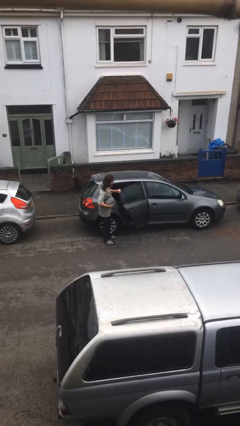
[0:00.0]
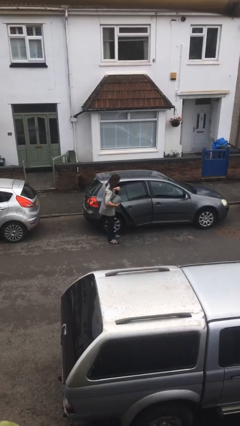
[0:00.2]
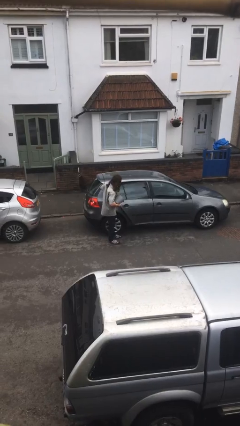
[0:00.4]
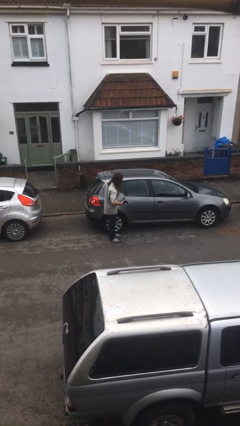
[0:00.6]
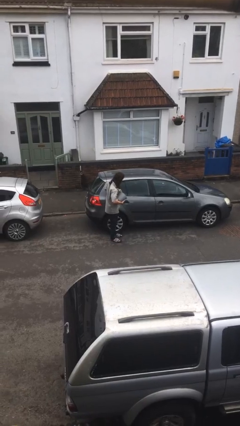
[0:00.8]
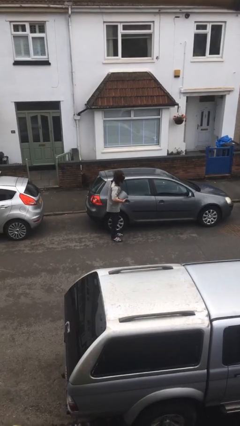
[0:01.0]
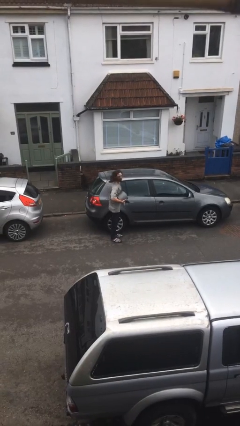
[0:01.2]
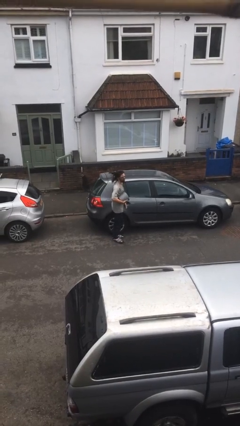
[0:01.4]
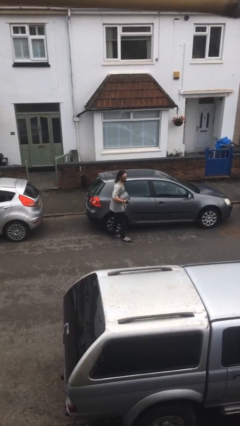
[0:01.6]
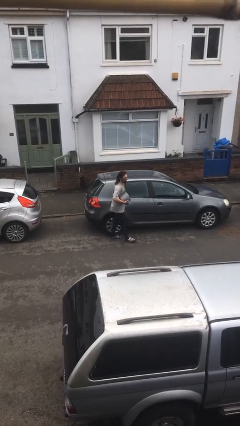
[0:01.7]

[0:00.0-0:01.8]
person closes car door

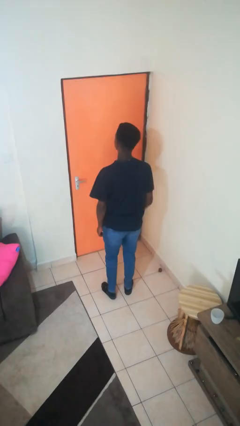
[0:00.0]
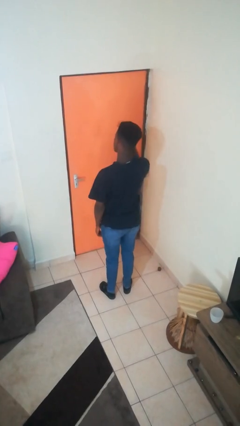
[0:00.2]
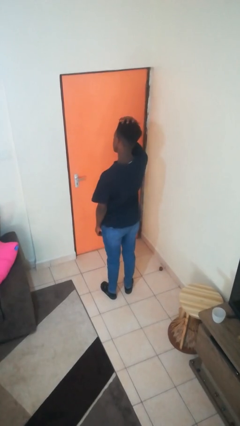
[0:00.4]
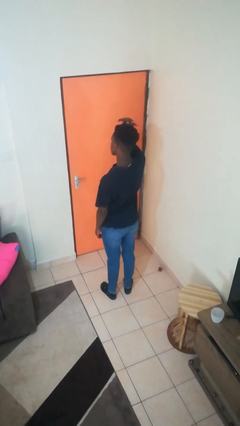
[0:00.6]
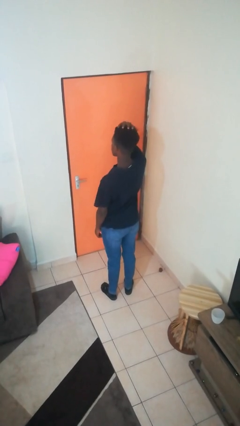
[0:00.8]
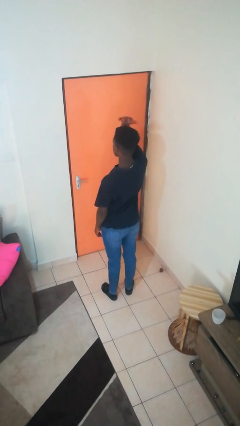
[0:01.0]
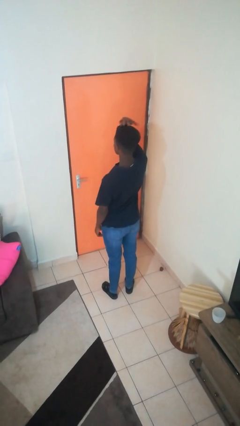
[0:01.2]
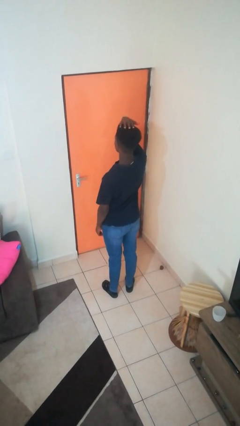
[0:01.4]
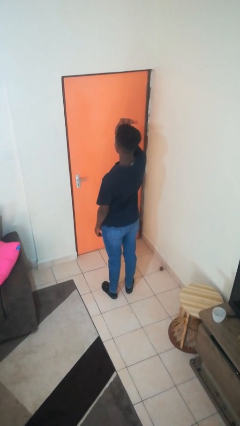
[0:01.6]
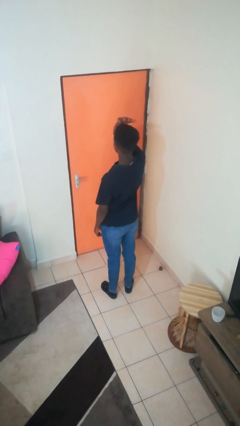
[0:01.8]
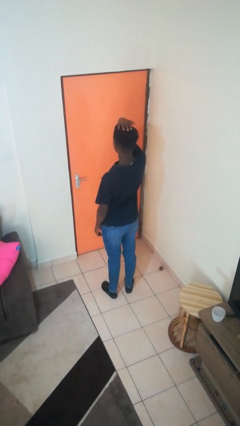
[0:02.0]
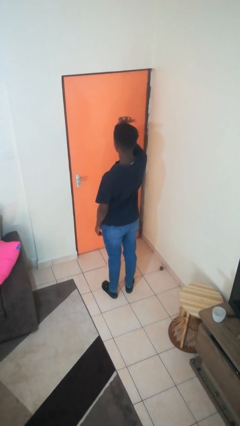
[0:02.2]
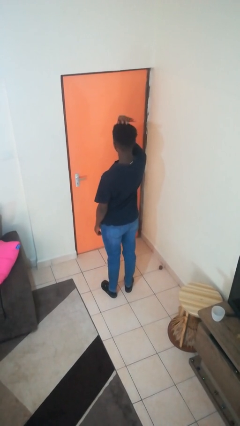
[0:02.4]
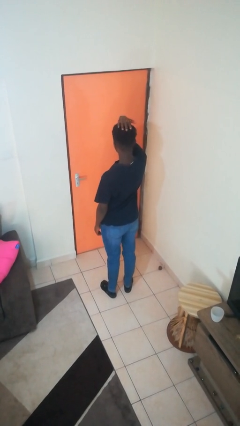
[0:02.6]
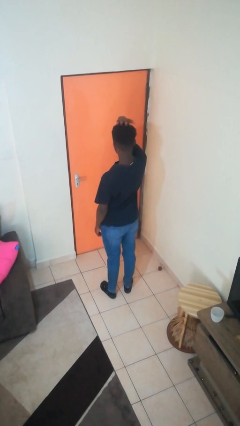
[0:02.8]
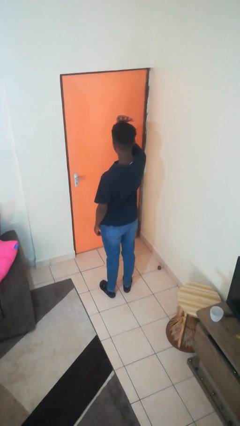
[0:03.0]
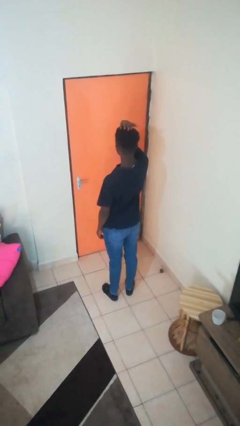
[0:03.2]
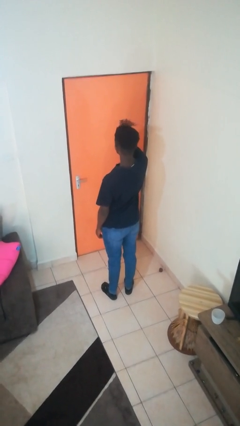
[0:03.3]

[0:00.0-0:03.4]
person pats head

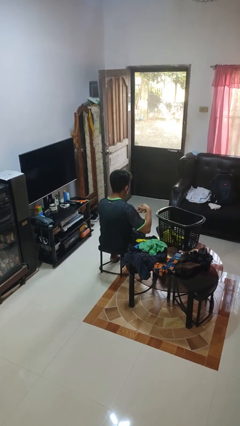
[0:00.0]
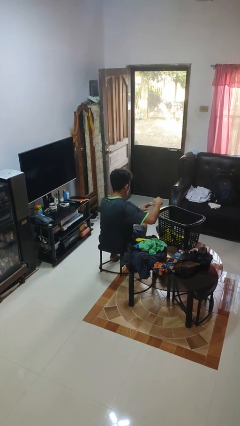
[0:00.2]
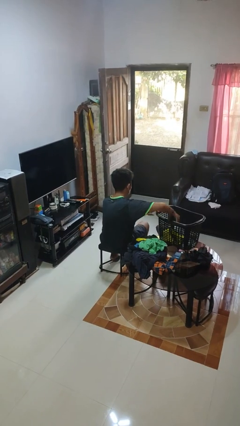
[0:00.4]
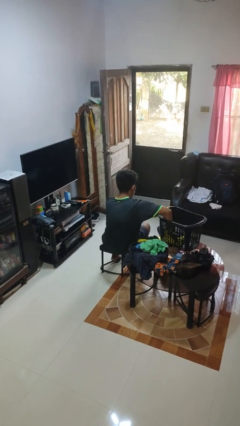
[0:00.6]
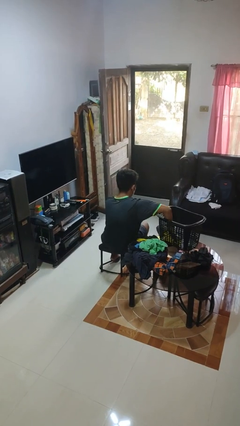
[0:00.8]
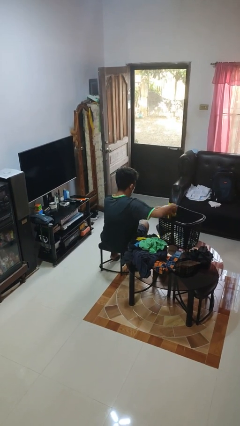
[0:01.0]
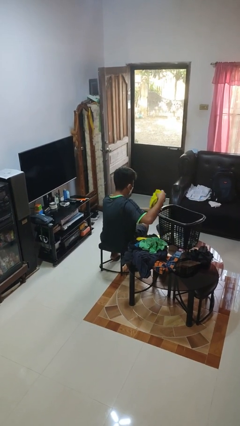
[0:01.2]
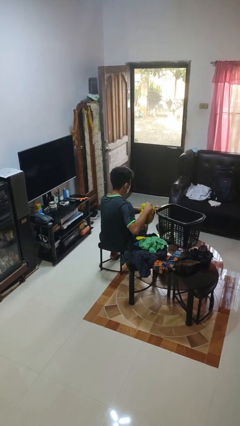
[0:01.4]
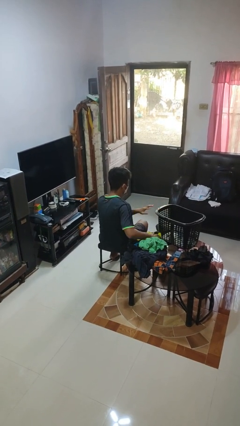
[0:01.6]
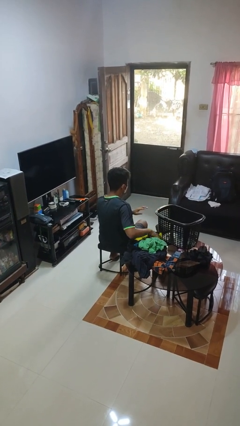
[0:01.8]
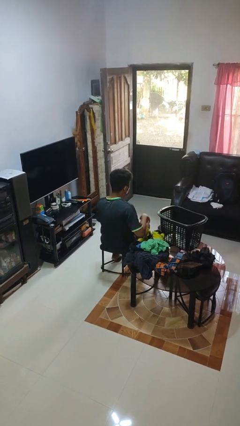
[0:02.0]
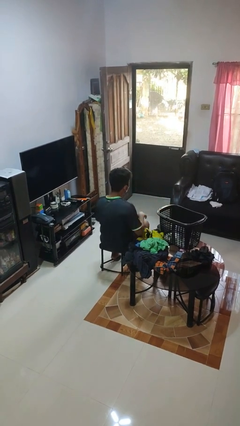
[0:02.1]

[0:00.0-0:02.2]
person takes object from basket

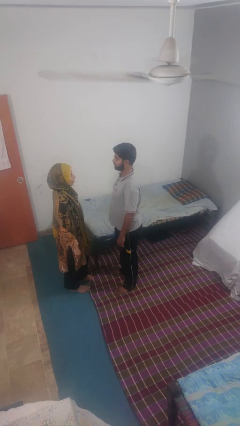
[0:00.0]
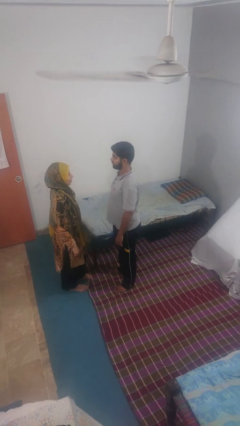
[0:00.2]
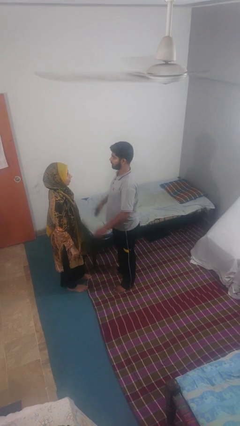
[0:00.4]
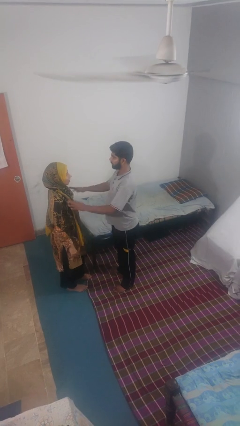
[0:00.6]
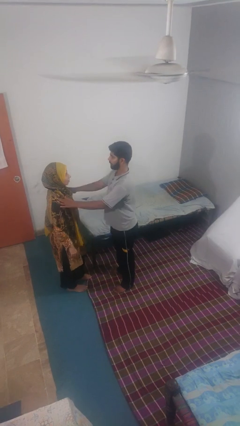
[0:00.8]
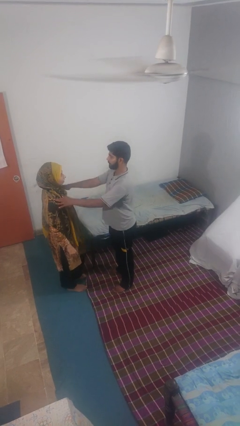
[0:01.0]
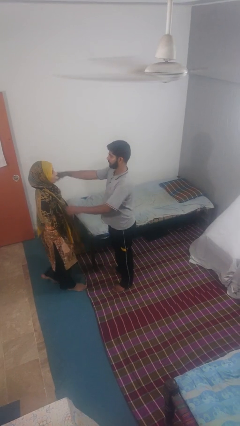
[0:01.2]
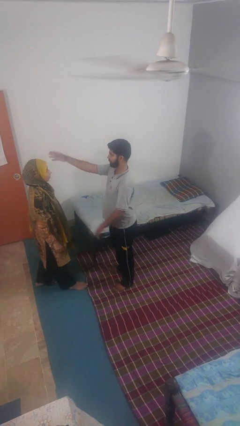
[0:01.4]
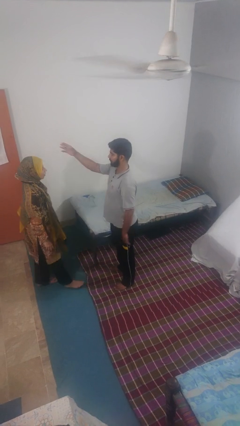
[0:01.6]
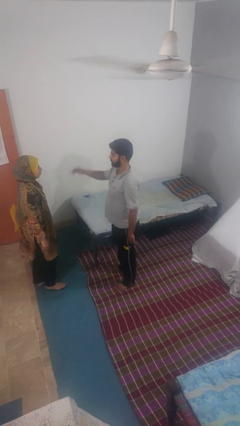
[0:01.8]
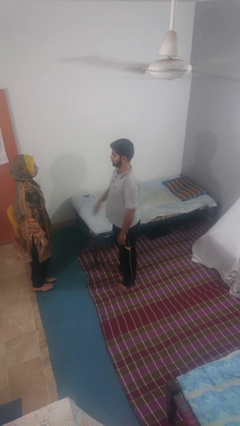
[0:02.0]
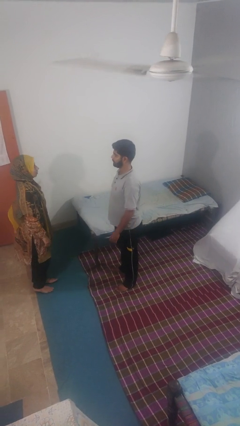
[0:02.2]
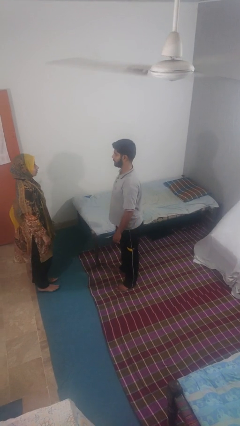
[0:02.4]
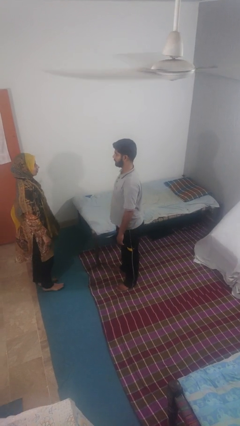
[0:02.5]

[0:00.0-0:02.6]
person shoves person

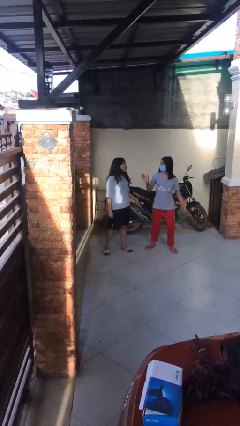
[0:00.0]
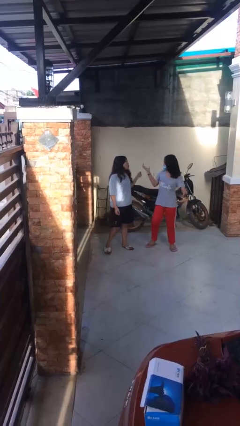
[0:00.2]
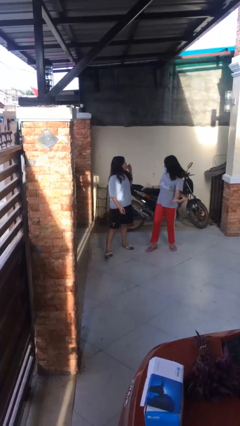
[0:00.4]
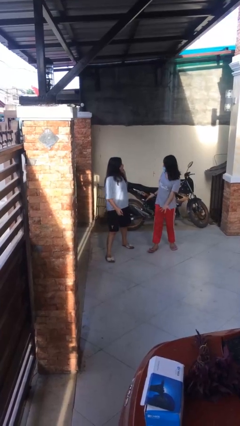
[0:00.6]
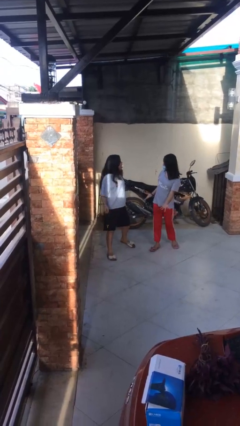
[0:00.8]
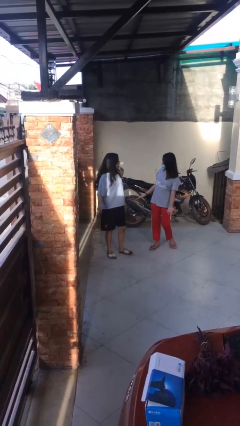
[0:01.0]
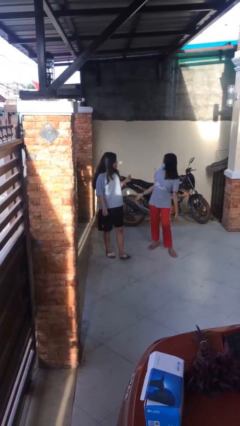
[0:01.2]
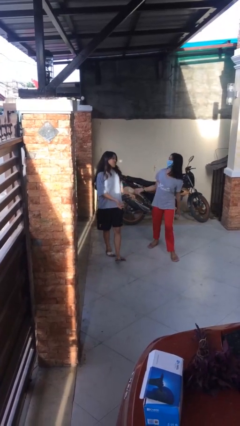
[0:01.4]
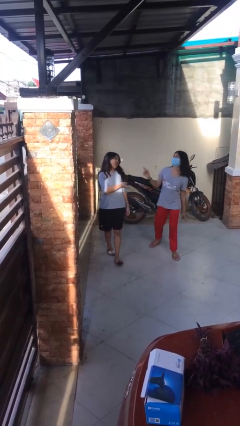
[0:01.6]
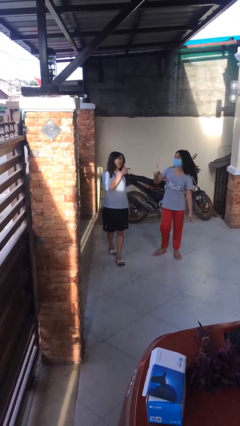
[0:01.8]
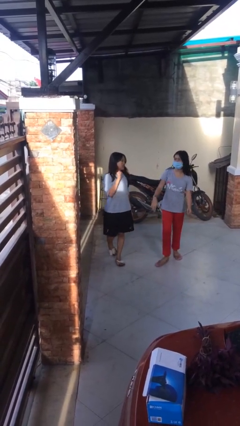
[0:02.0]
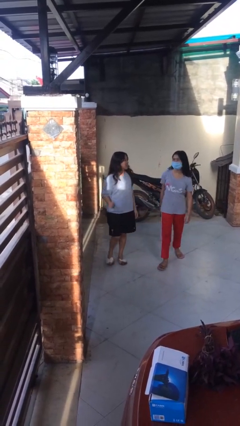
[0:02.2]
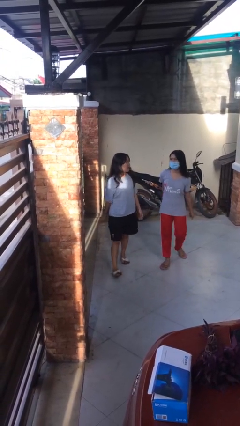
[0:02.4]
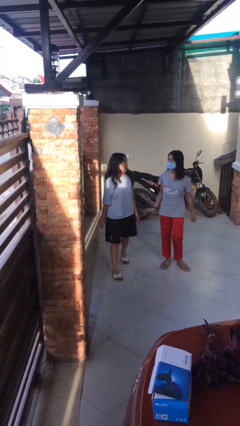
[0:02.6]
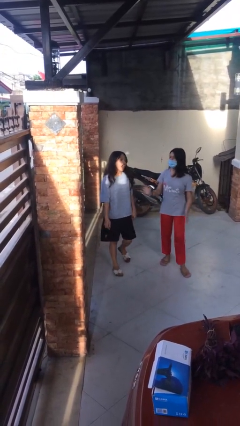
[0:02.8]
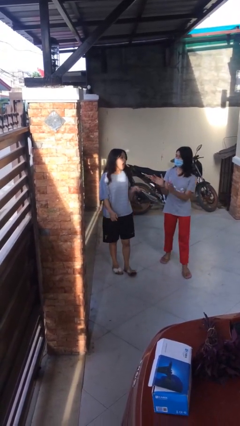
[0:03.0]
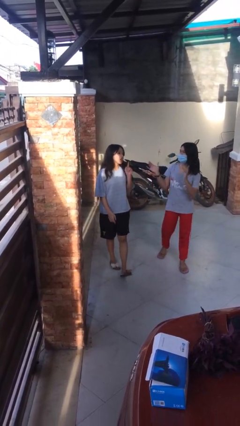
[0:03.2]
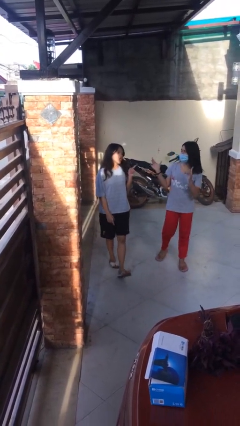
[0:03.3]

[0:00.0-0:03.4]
person talks to person

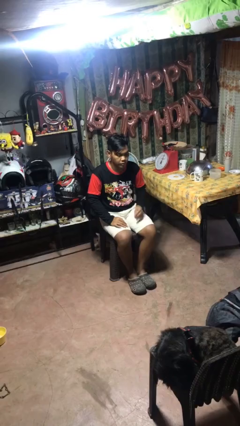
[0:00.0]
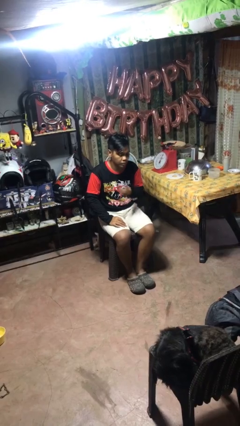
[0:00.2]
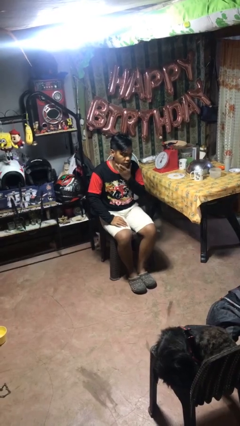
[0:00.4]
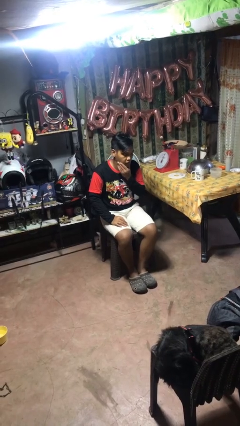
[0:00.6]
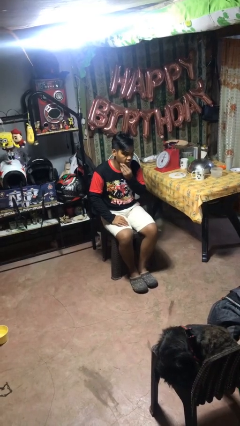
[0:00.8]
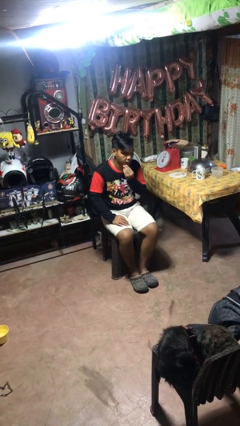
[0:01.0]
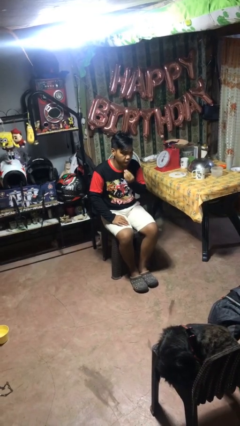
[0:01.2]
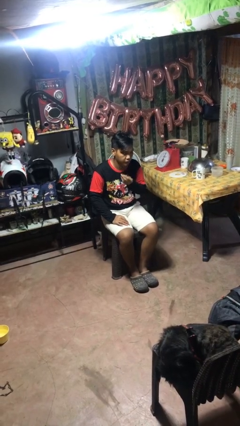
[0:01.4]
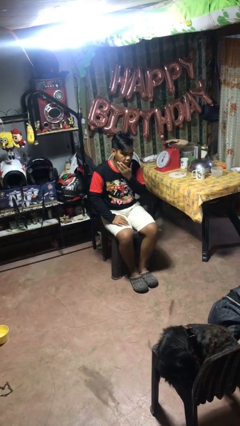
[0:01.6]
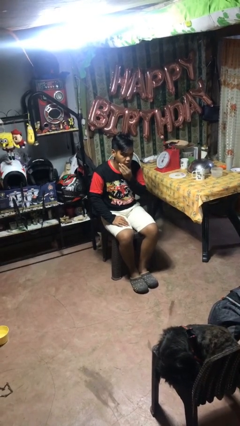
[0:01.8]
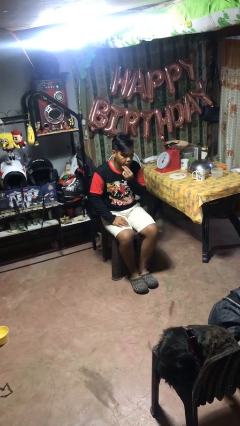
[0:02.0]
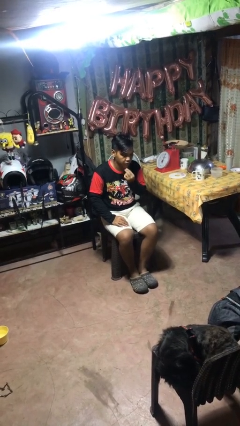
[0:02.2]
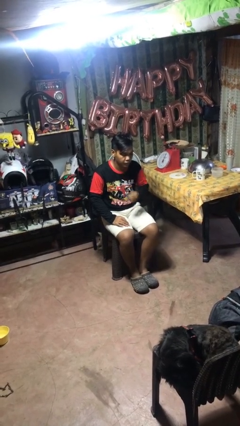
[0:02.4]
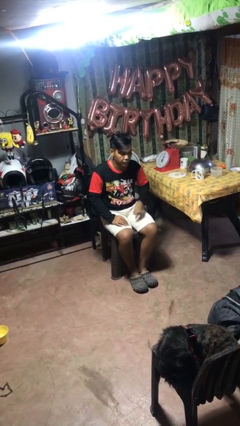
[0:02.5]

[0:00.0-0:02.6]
person strokes chin

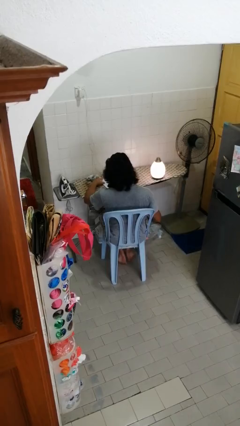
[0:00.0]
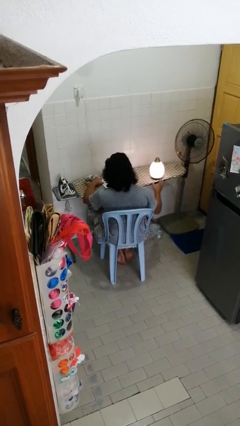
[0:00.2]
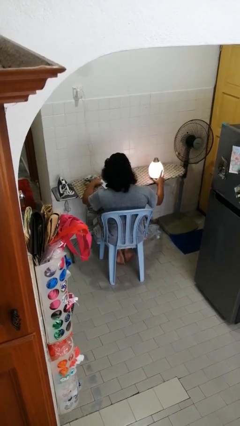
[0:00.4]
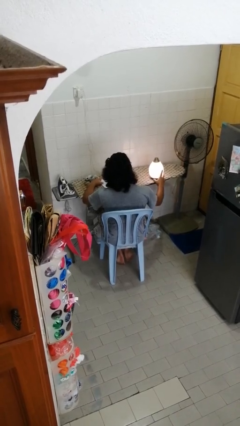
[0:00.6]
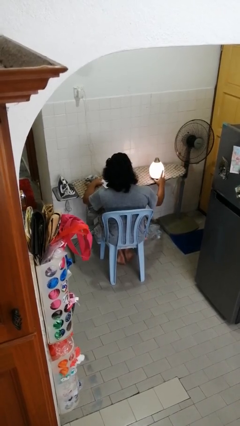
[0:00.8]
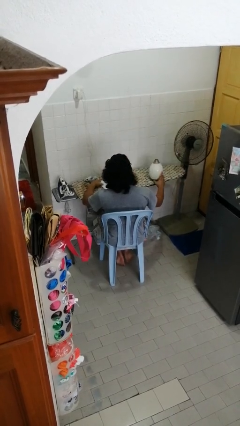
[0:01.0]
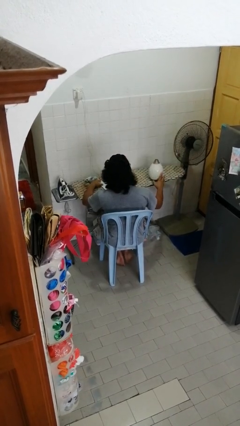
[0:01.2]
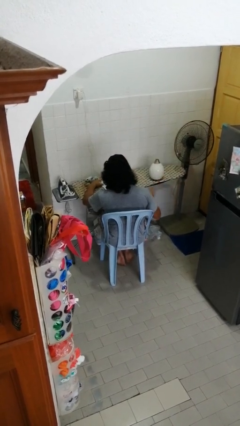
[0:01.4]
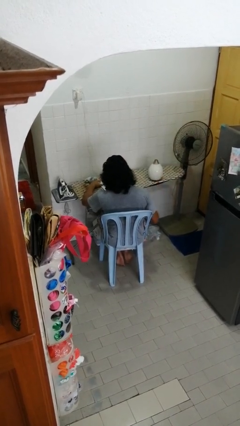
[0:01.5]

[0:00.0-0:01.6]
person turns off lamp
